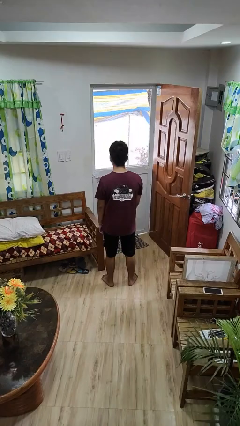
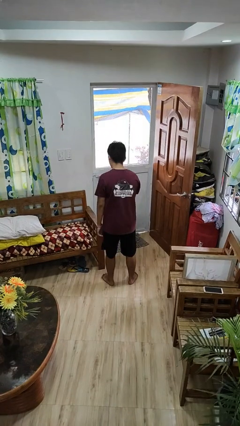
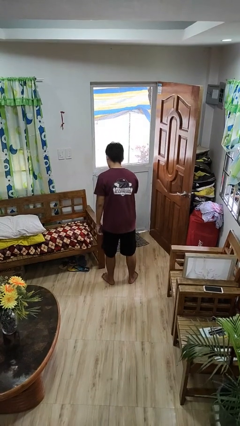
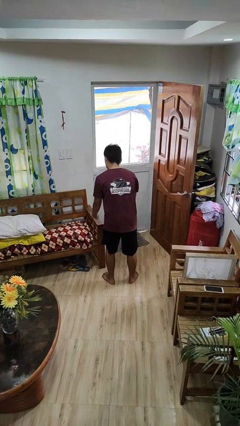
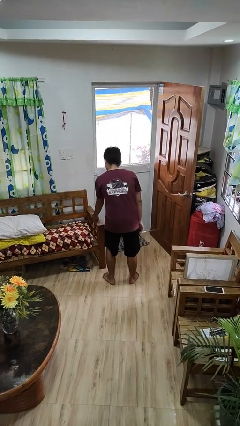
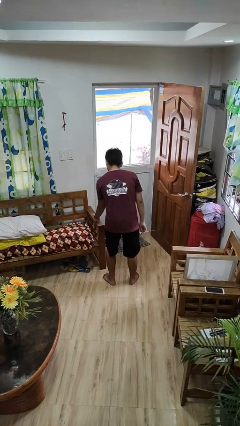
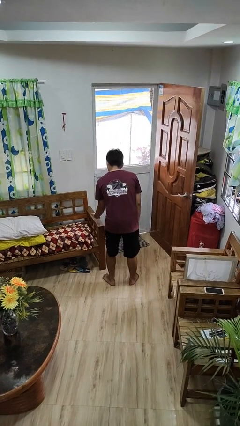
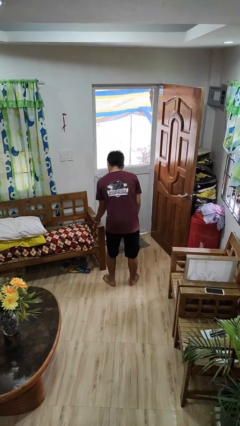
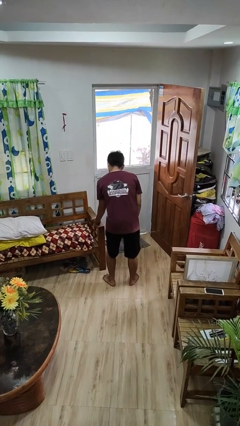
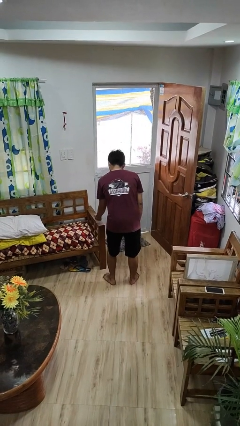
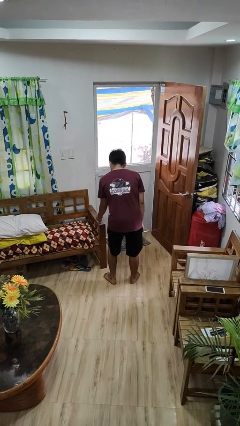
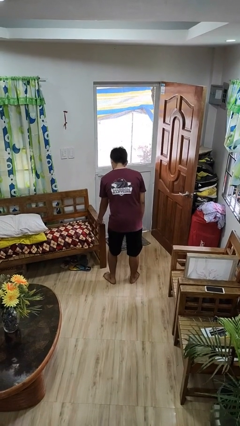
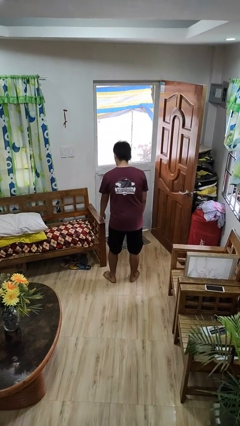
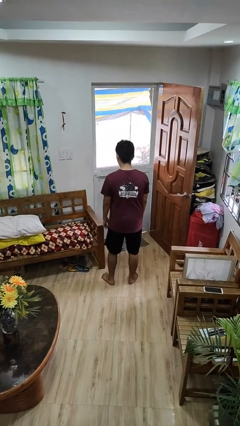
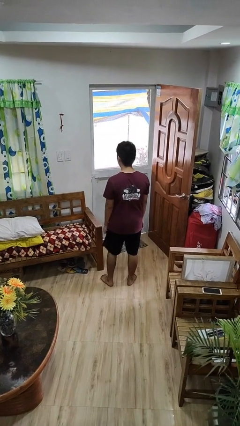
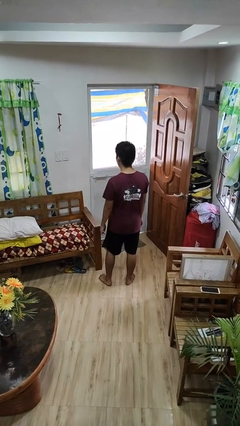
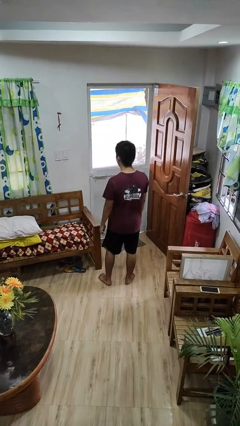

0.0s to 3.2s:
person taps object with finger

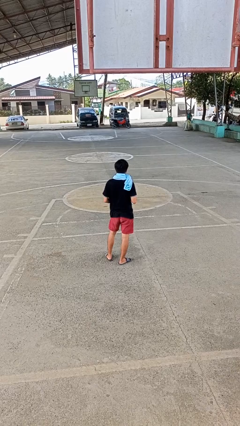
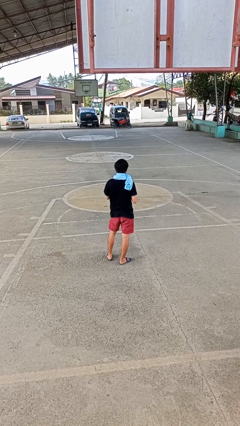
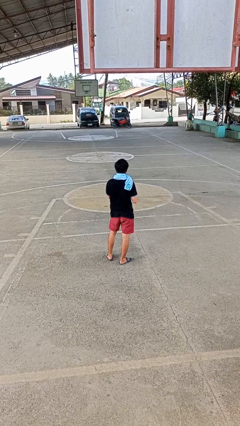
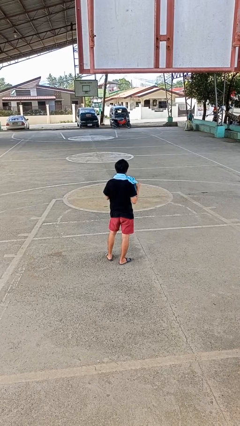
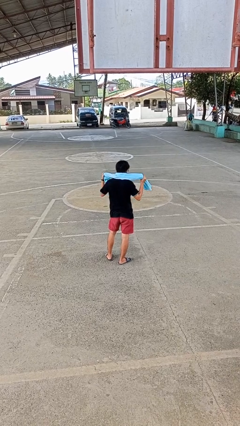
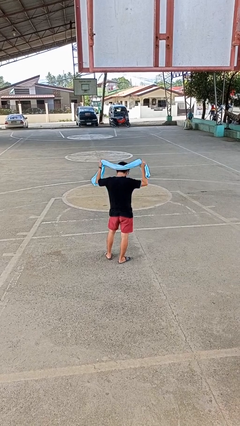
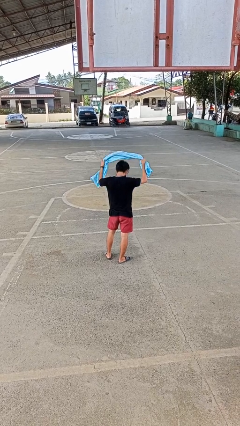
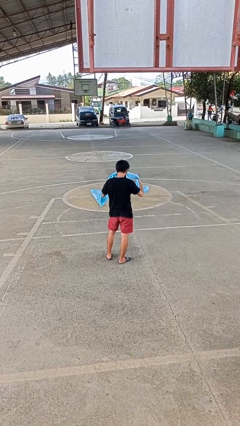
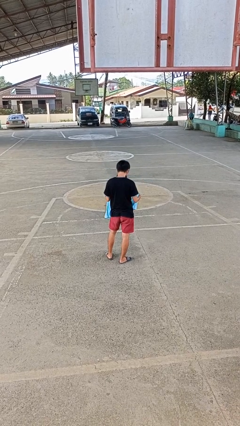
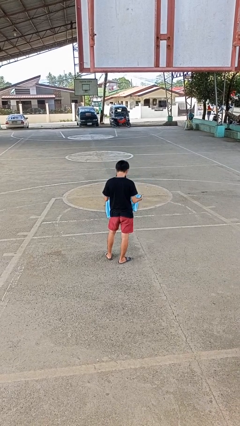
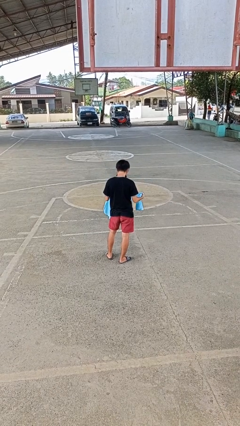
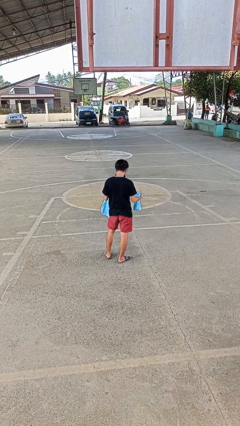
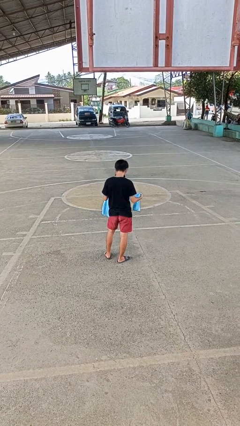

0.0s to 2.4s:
person takes off scarf

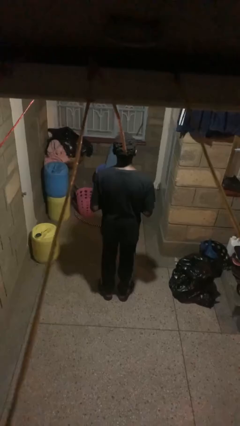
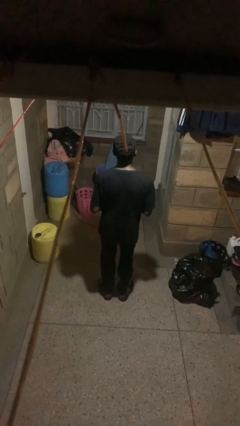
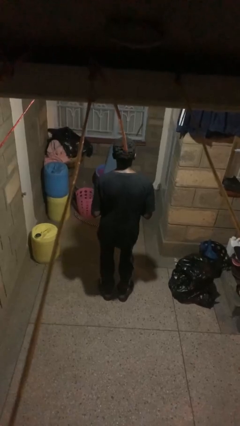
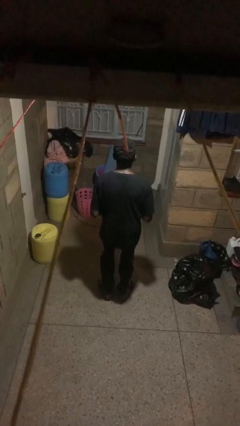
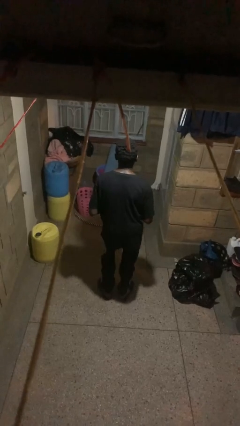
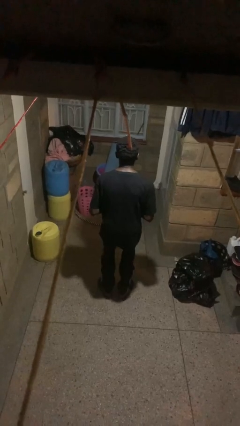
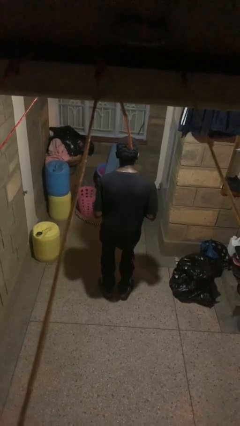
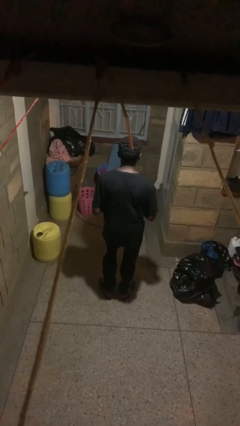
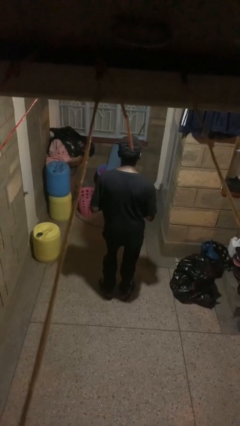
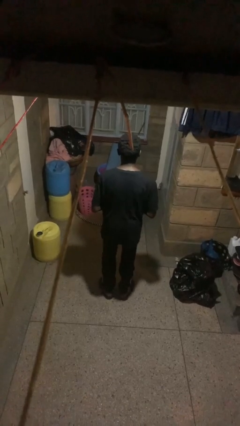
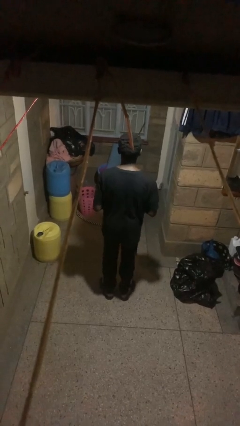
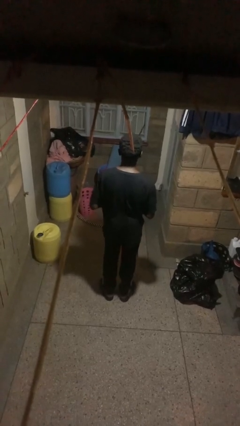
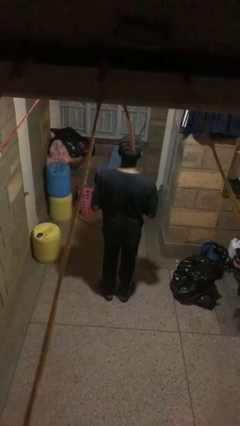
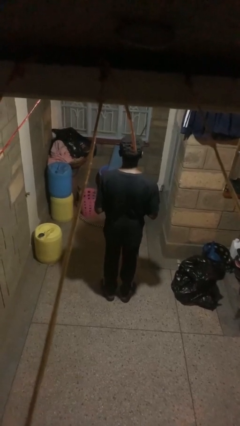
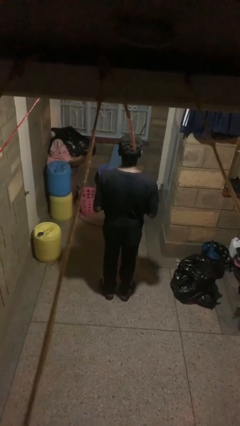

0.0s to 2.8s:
person wiggles hips

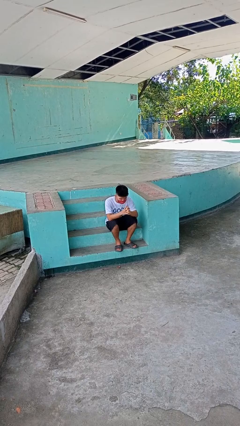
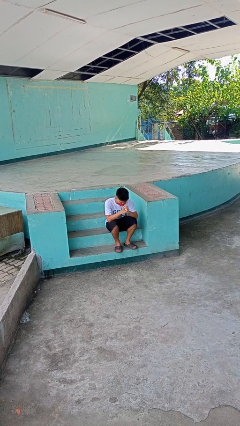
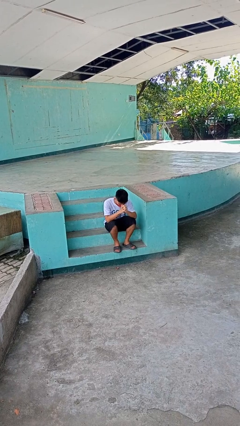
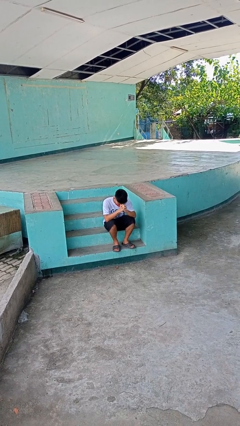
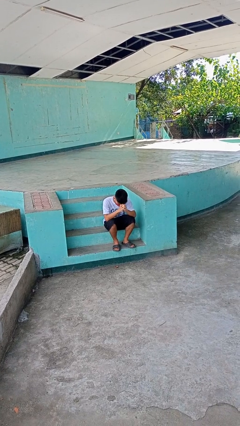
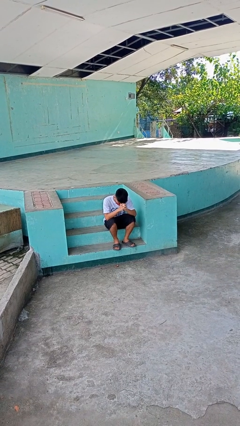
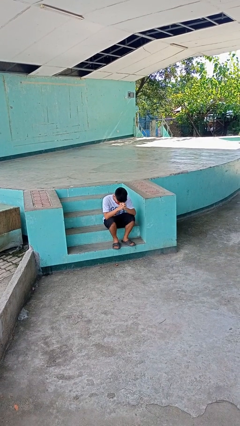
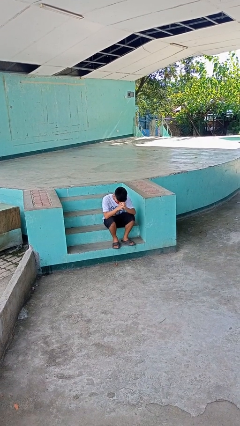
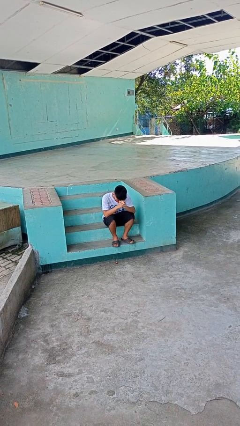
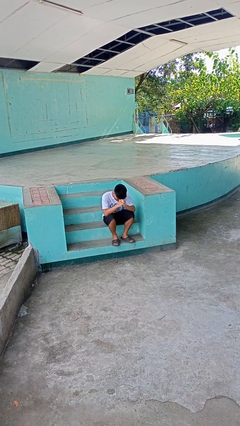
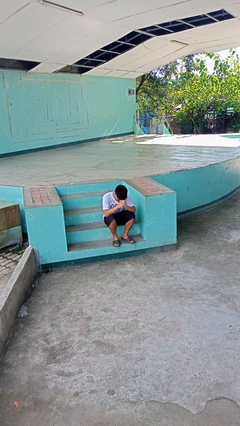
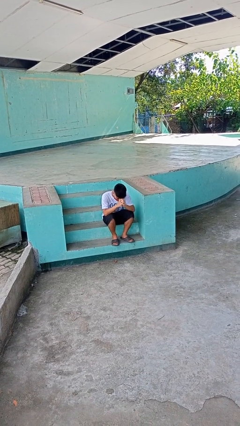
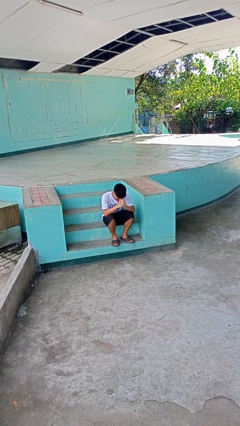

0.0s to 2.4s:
person prays

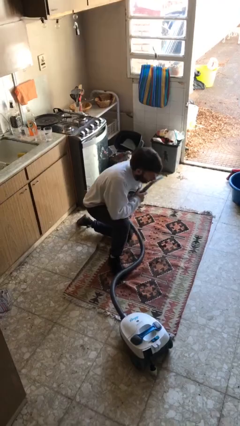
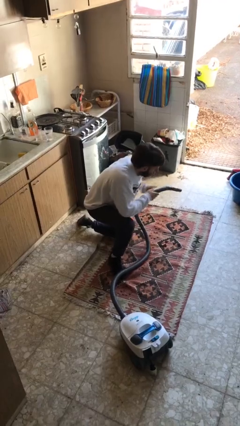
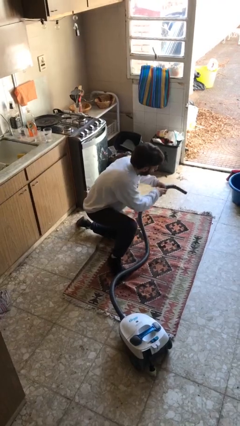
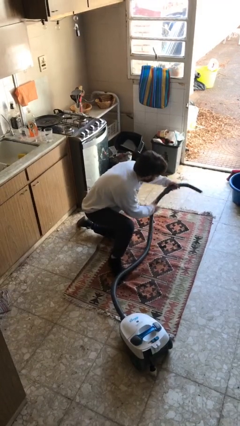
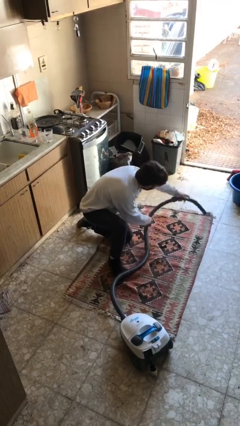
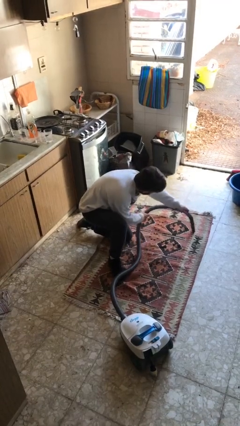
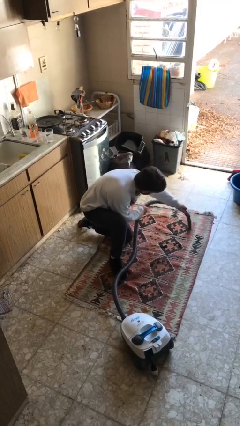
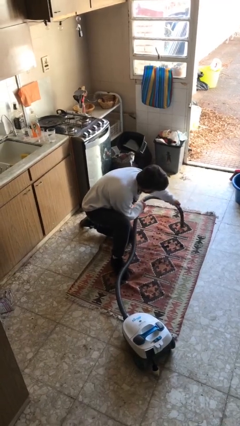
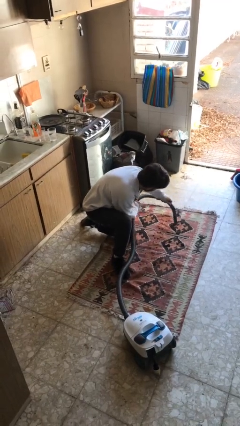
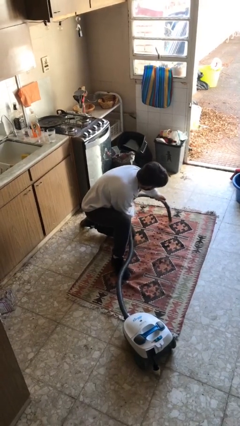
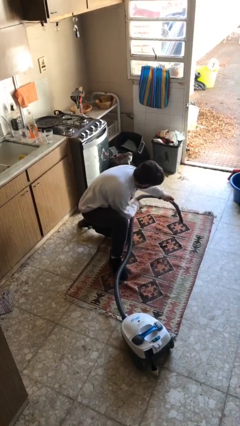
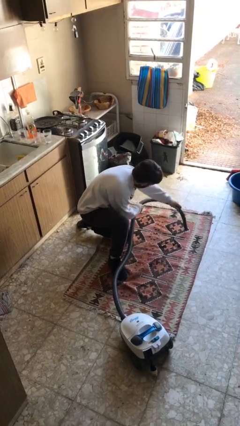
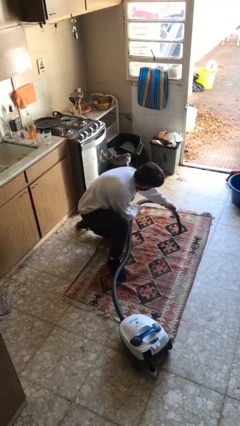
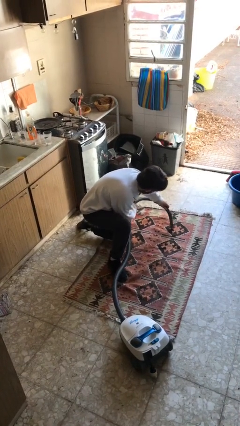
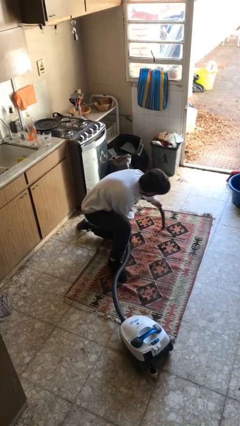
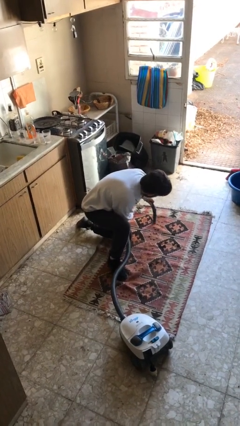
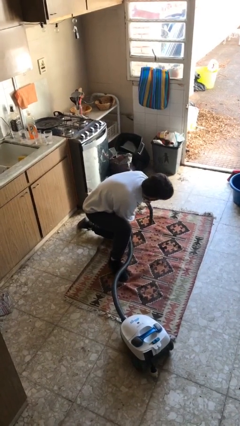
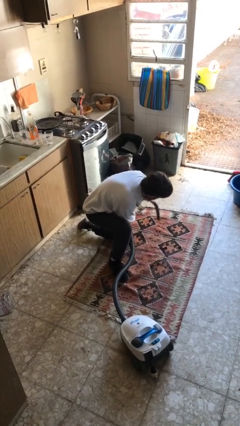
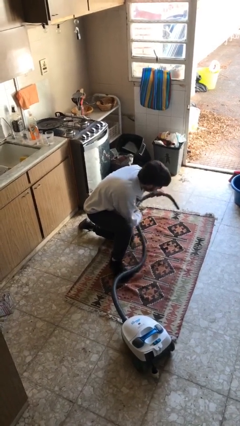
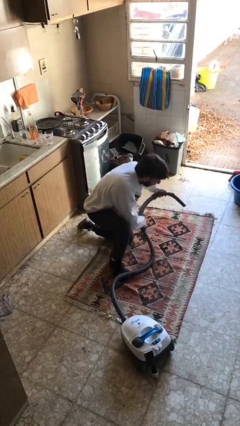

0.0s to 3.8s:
person vacuums carpet

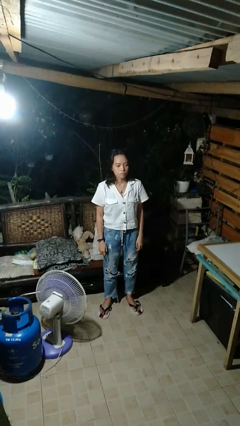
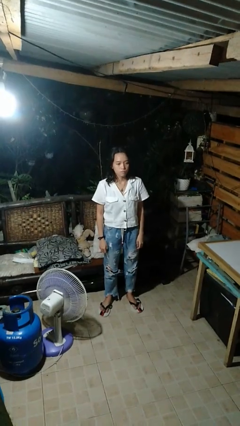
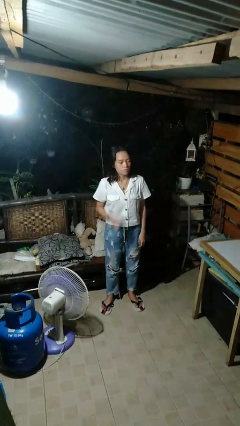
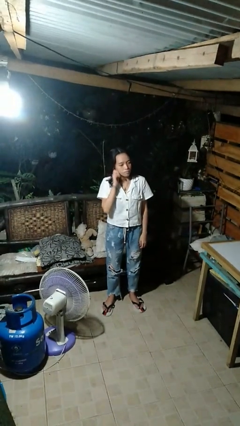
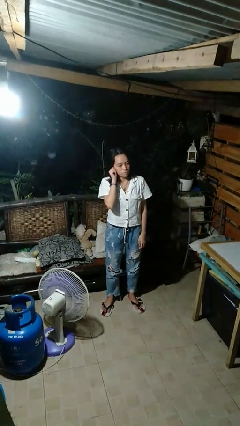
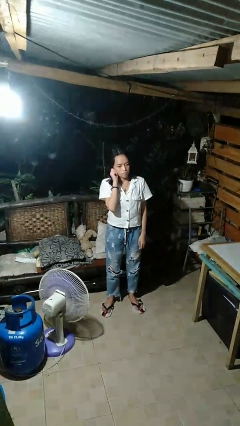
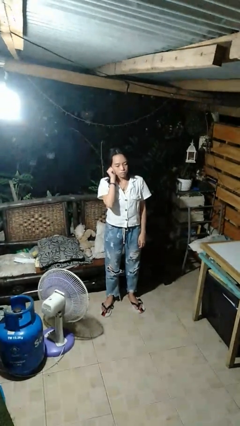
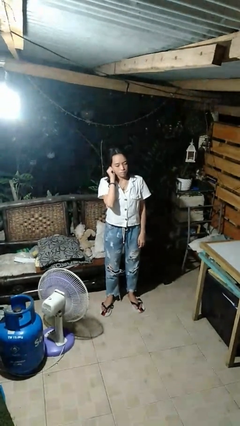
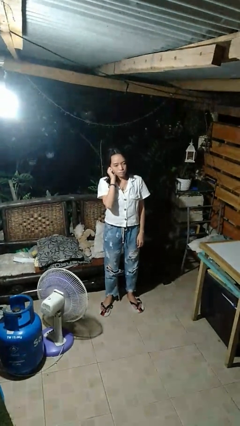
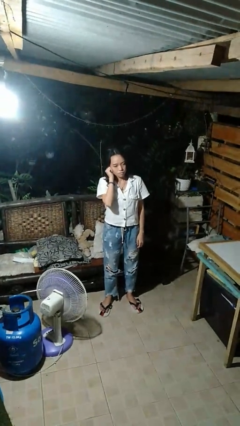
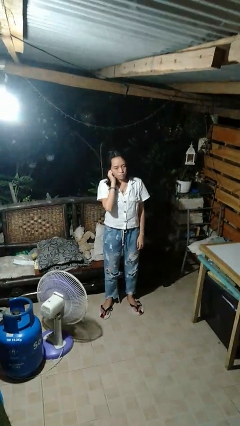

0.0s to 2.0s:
person touches earlobe

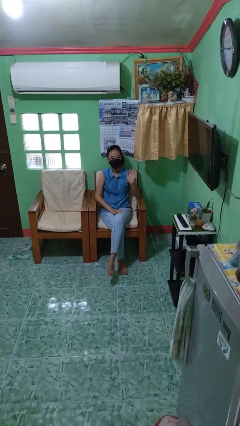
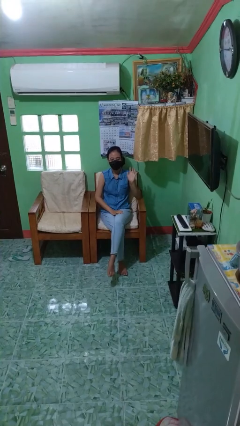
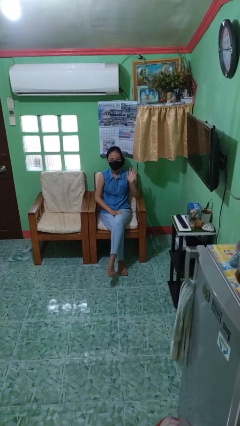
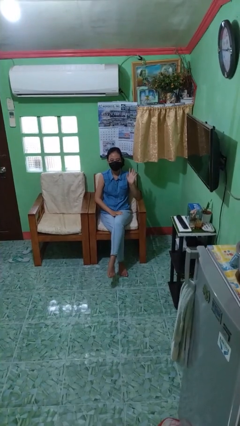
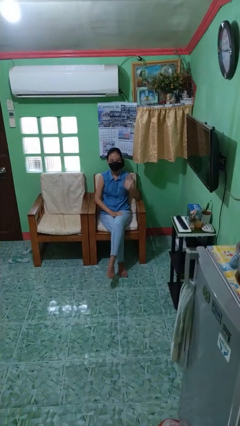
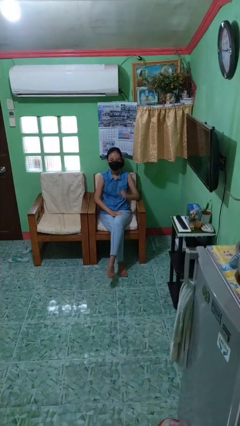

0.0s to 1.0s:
person gestures number five
